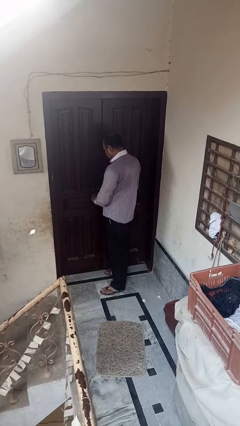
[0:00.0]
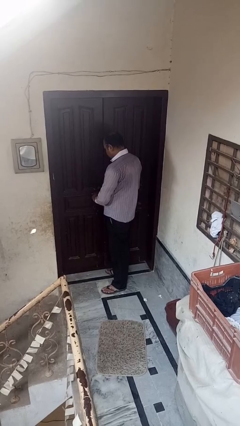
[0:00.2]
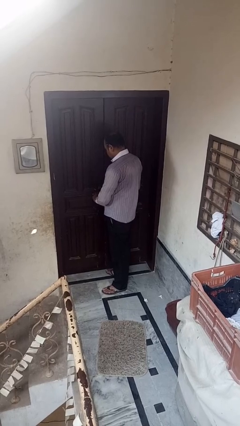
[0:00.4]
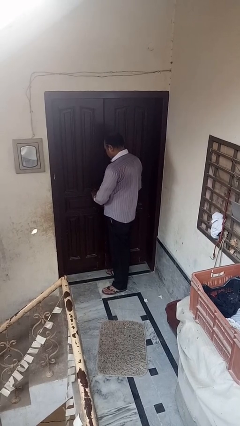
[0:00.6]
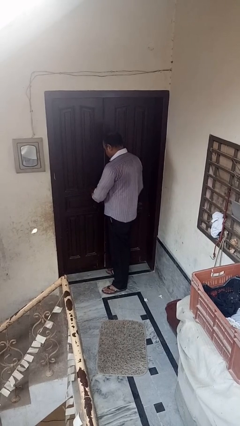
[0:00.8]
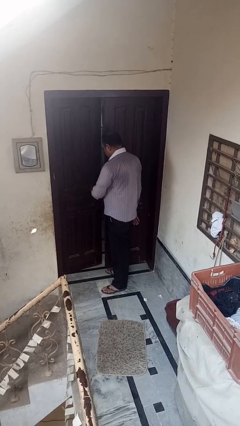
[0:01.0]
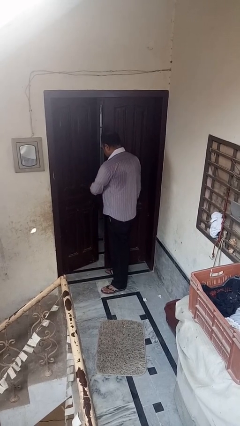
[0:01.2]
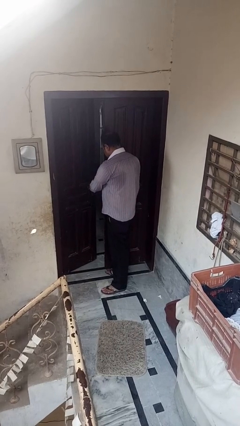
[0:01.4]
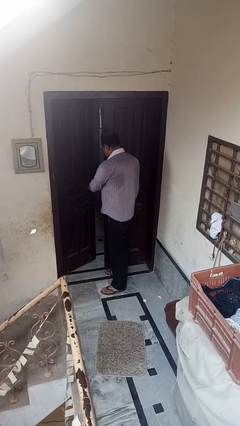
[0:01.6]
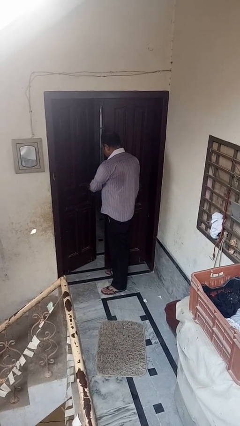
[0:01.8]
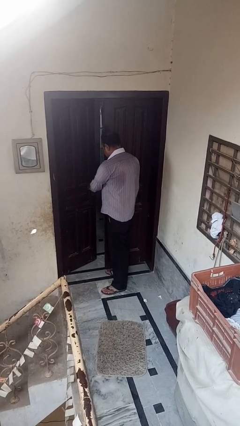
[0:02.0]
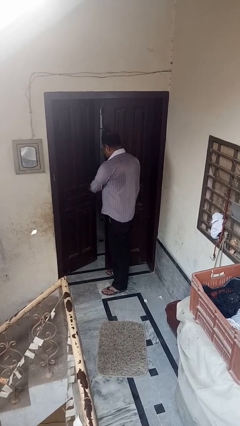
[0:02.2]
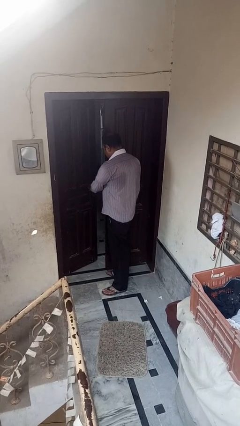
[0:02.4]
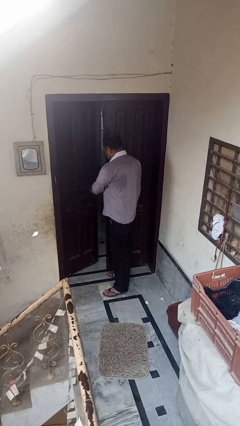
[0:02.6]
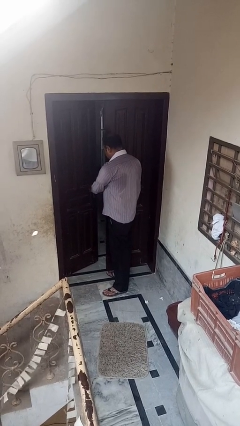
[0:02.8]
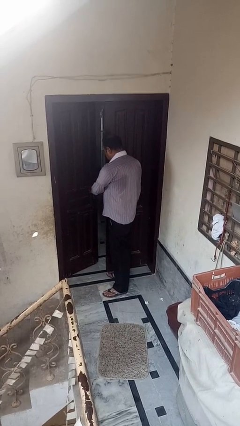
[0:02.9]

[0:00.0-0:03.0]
person opens facility door

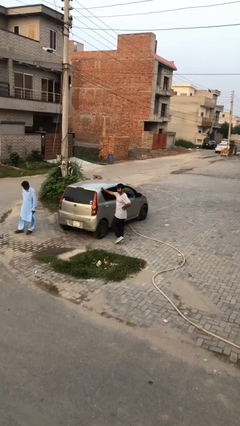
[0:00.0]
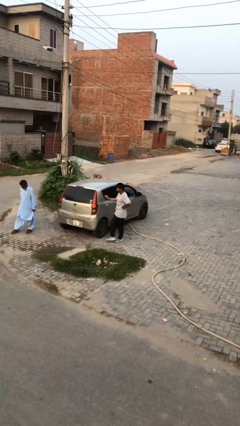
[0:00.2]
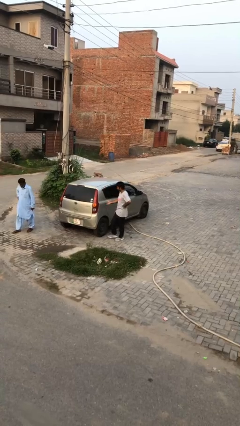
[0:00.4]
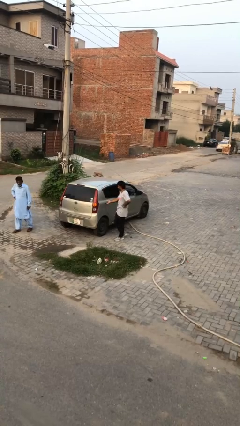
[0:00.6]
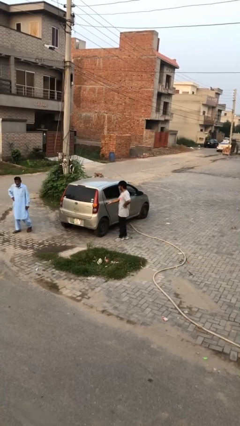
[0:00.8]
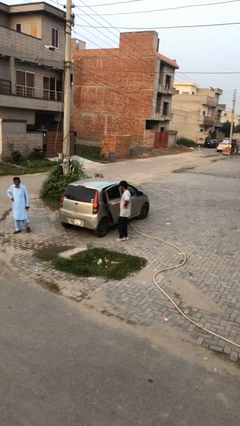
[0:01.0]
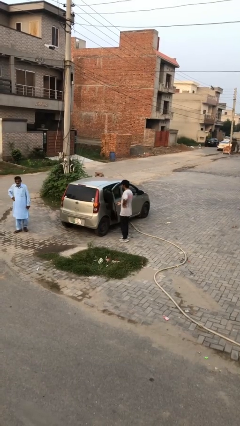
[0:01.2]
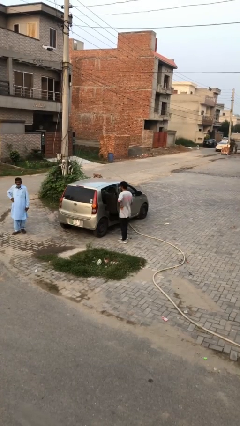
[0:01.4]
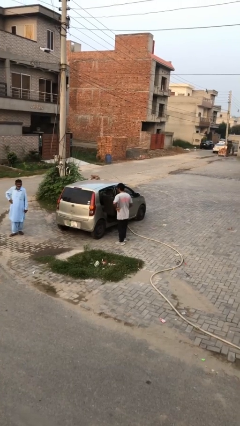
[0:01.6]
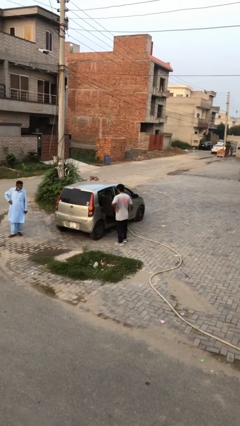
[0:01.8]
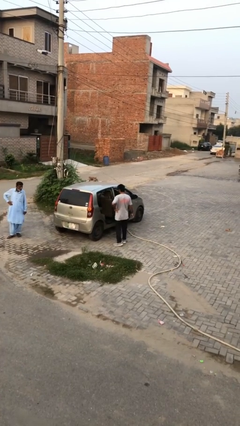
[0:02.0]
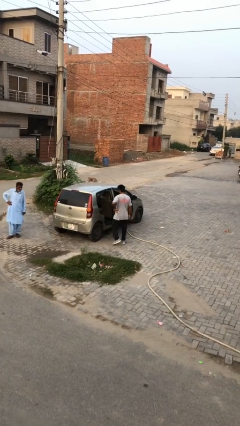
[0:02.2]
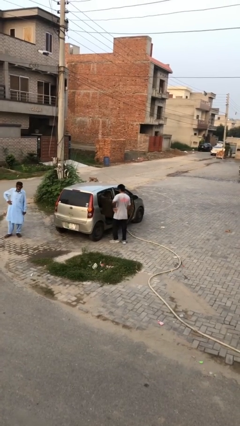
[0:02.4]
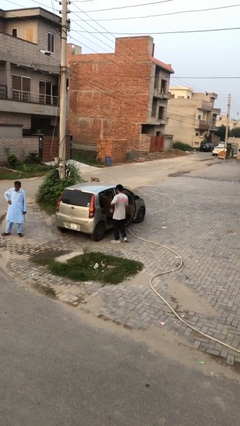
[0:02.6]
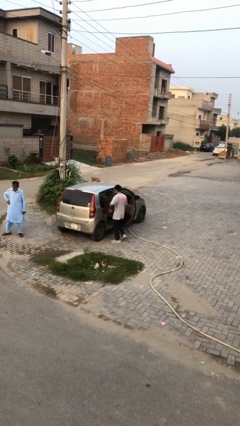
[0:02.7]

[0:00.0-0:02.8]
person opens car door

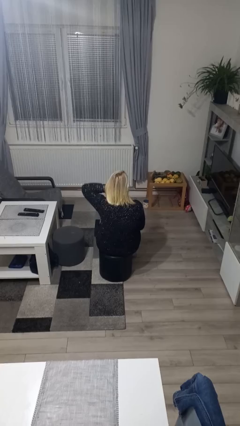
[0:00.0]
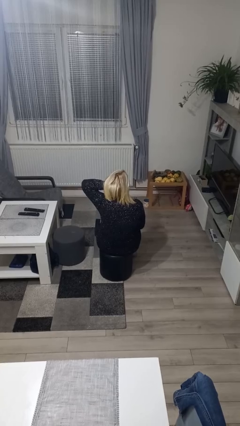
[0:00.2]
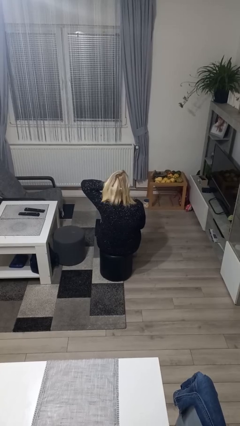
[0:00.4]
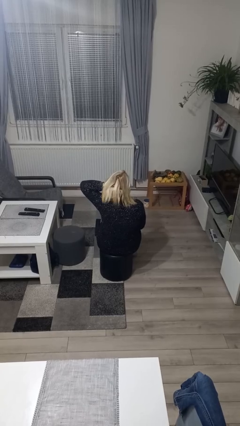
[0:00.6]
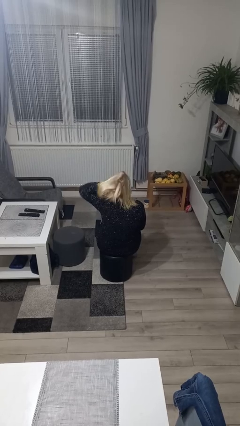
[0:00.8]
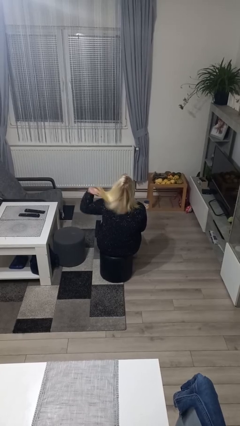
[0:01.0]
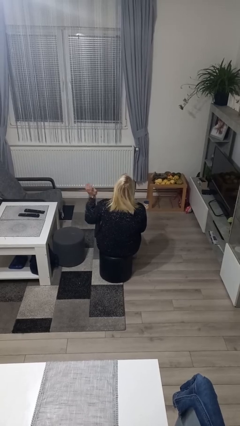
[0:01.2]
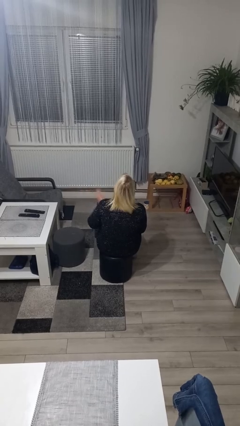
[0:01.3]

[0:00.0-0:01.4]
person strokes hair

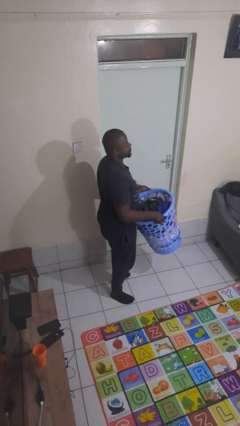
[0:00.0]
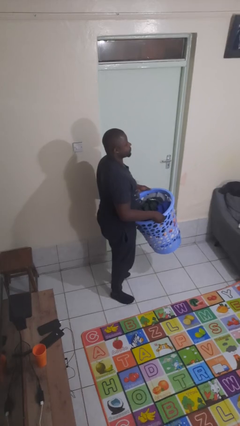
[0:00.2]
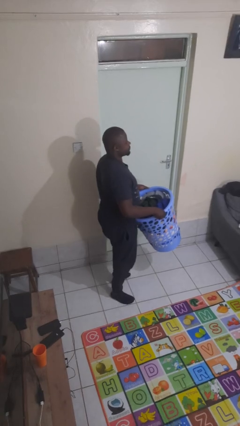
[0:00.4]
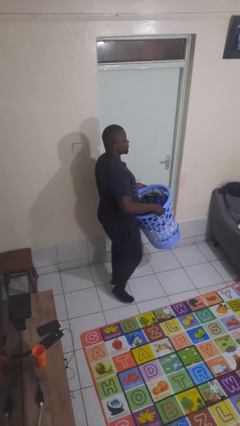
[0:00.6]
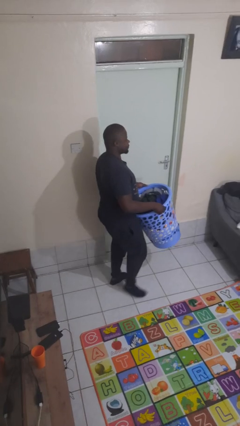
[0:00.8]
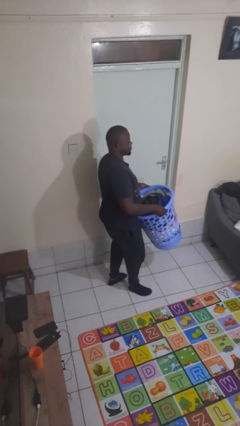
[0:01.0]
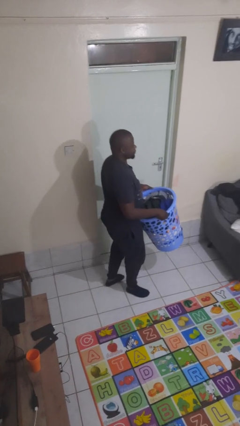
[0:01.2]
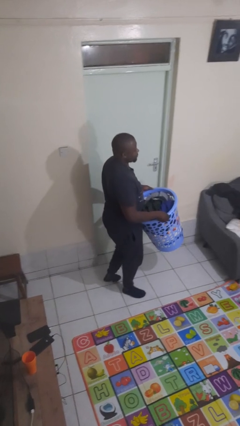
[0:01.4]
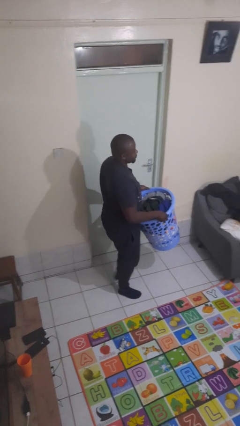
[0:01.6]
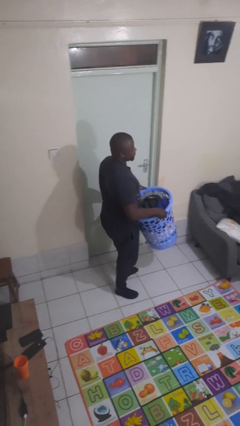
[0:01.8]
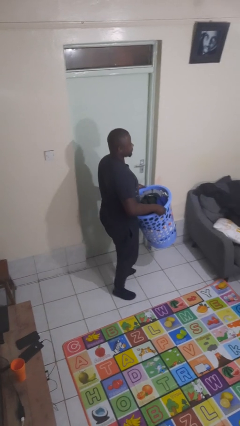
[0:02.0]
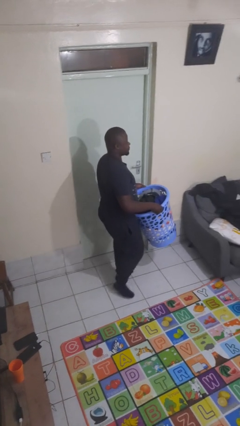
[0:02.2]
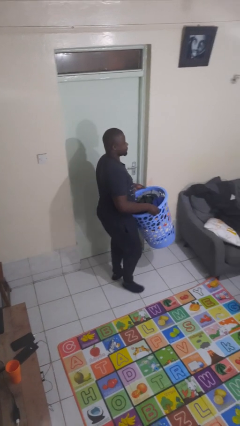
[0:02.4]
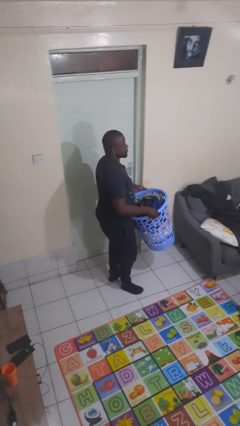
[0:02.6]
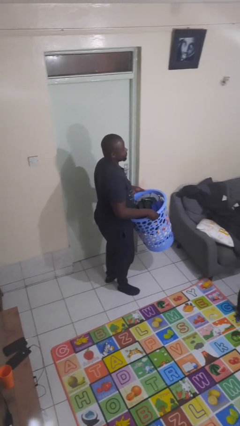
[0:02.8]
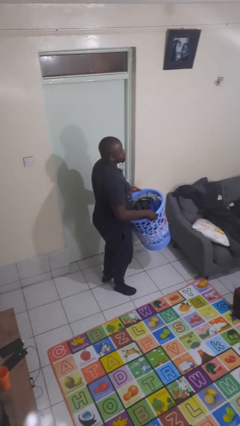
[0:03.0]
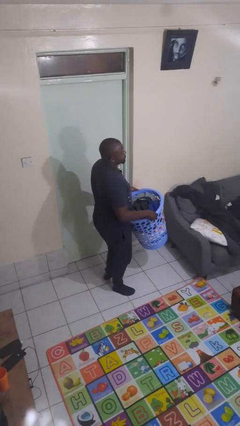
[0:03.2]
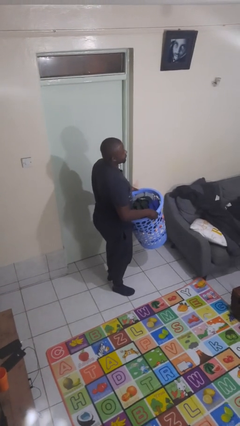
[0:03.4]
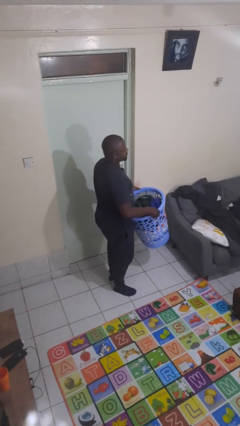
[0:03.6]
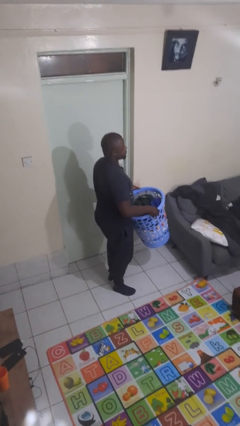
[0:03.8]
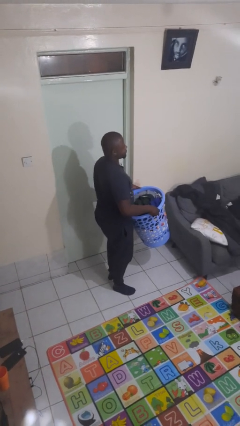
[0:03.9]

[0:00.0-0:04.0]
person carries laundry basket

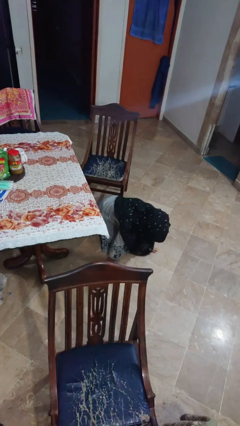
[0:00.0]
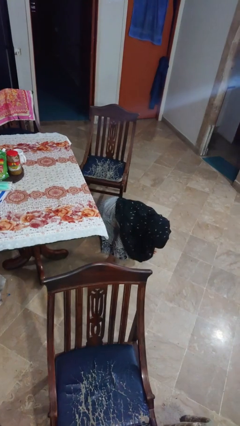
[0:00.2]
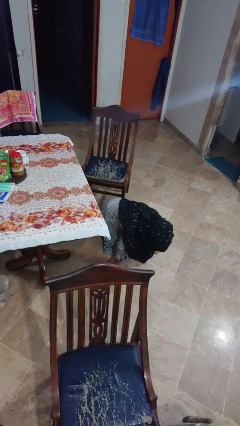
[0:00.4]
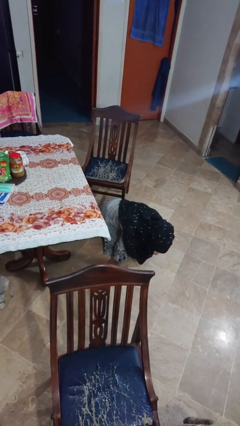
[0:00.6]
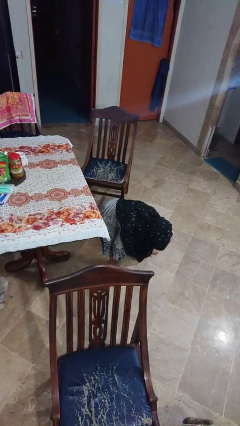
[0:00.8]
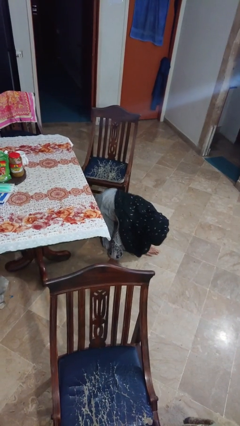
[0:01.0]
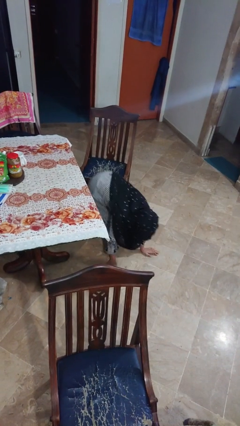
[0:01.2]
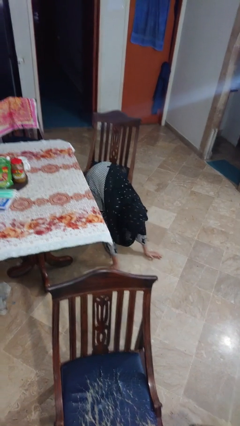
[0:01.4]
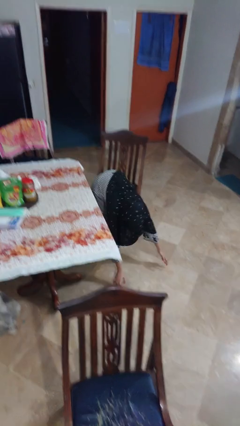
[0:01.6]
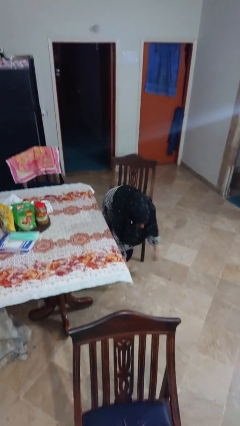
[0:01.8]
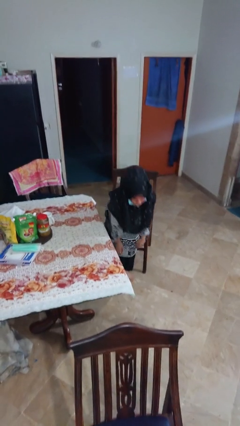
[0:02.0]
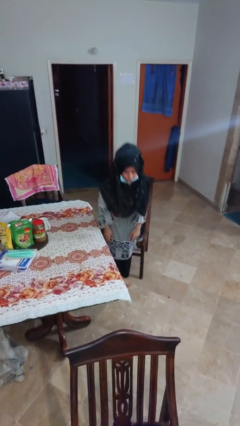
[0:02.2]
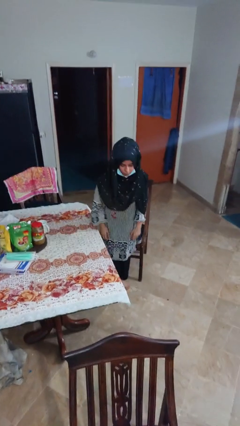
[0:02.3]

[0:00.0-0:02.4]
person stands up from floor

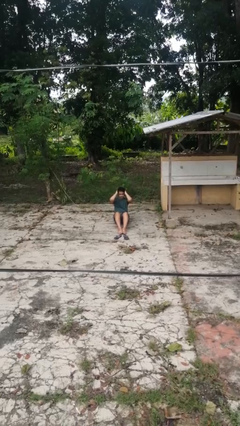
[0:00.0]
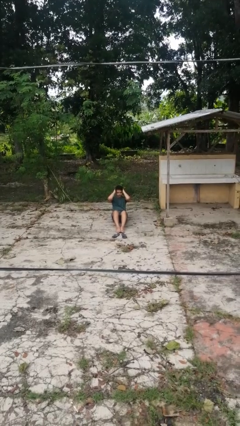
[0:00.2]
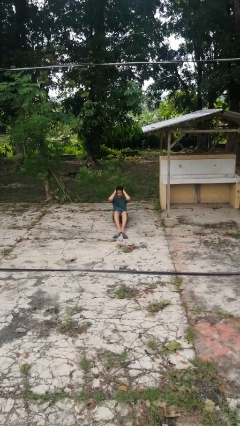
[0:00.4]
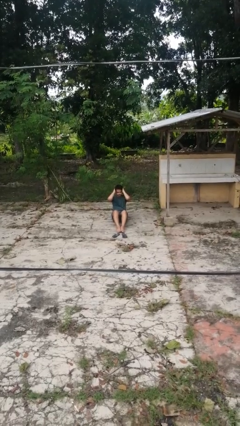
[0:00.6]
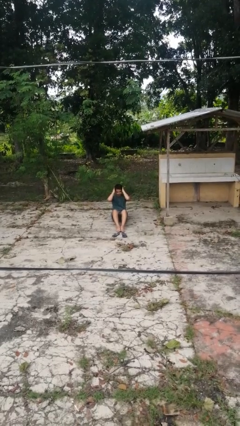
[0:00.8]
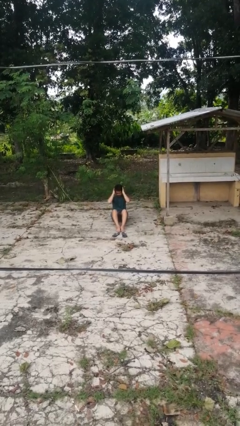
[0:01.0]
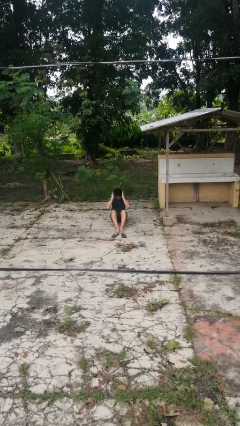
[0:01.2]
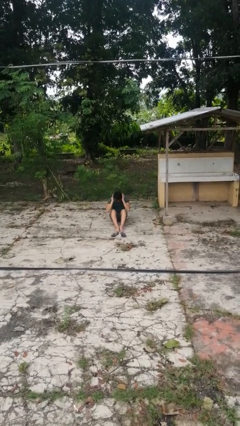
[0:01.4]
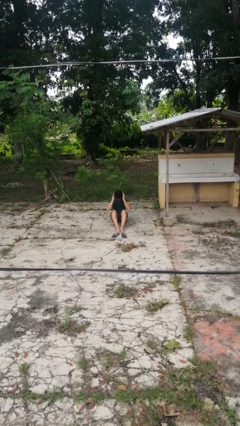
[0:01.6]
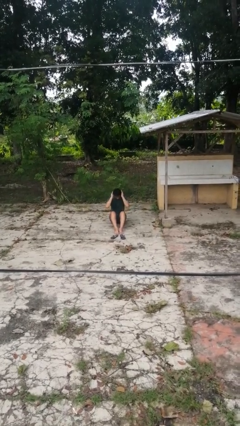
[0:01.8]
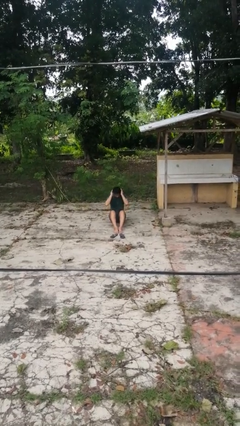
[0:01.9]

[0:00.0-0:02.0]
person exercises with situp

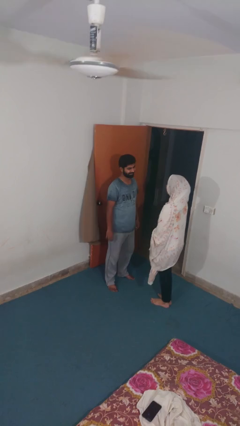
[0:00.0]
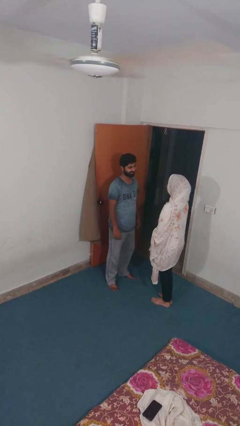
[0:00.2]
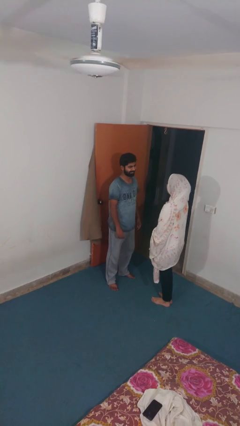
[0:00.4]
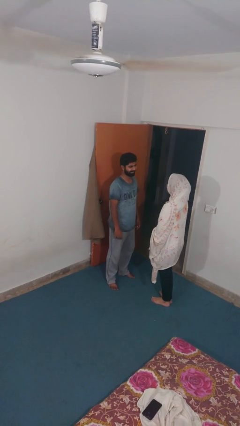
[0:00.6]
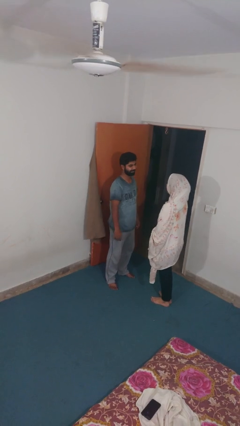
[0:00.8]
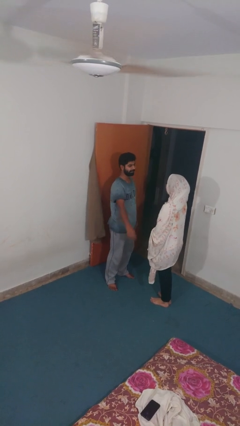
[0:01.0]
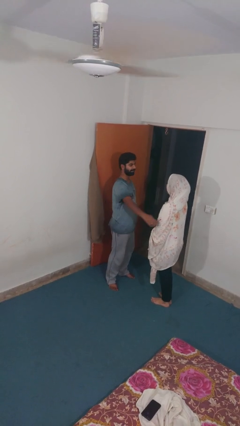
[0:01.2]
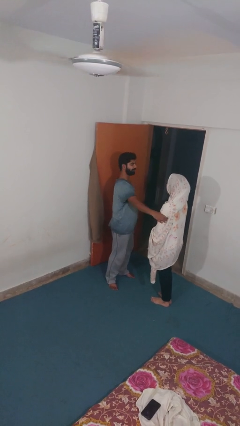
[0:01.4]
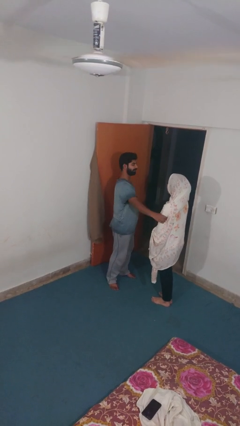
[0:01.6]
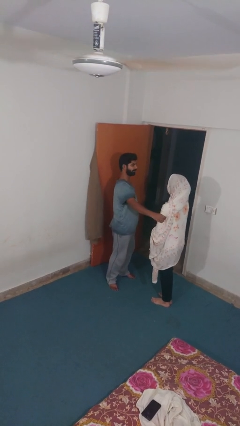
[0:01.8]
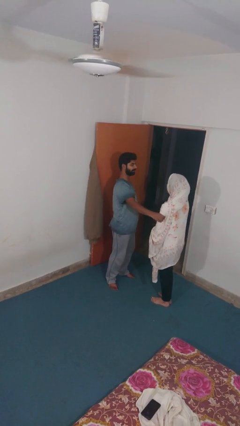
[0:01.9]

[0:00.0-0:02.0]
person grabs person by bicep
